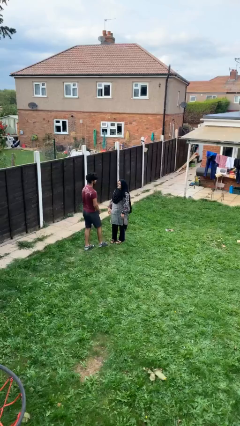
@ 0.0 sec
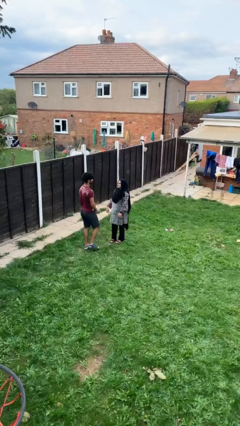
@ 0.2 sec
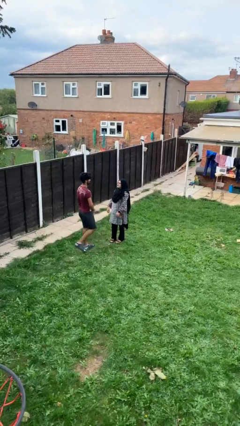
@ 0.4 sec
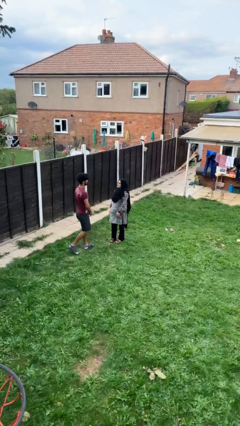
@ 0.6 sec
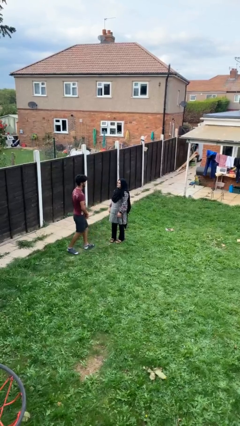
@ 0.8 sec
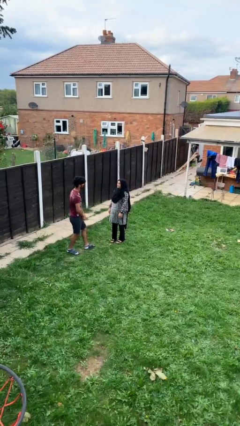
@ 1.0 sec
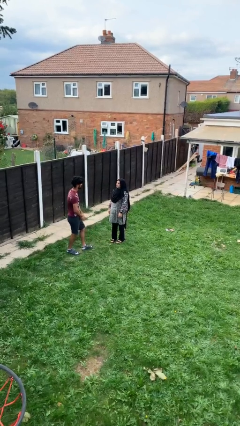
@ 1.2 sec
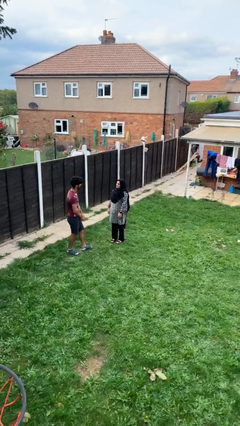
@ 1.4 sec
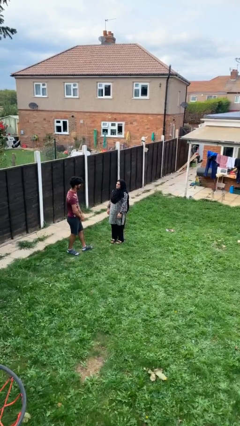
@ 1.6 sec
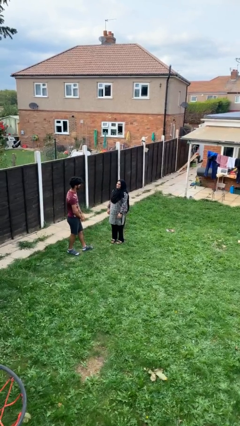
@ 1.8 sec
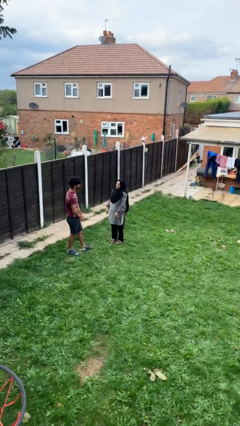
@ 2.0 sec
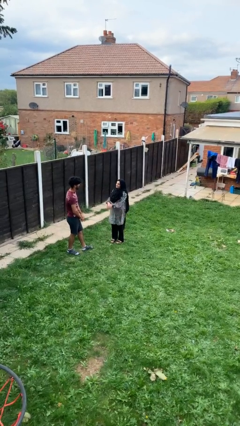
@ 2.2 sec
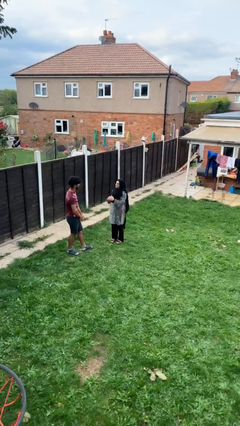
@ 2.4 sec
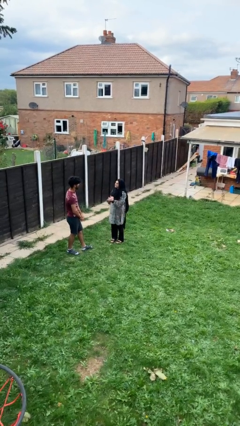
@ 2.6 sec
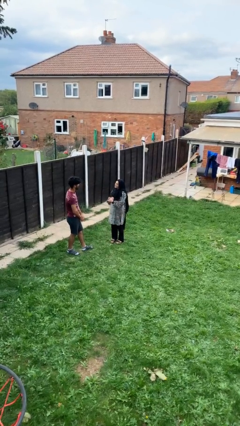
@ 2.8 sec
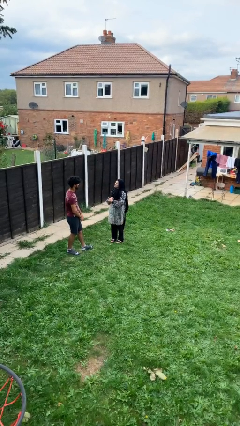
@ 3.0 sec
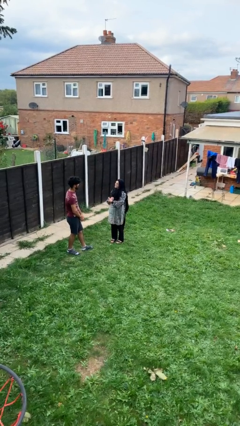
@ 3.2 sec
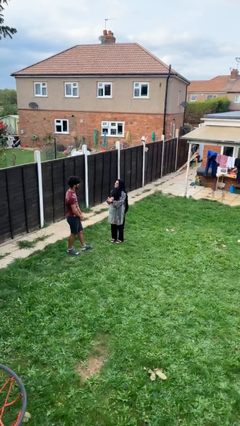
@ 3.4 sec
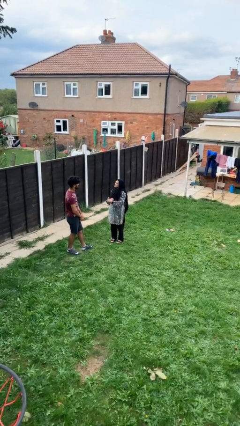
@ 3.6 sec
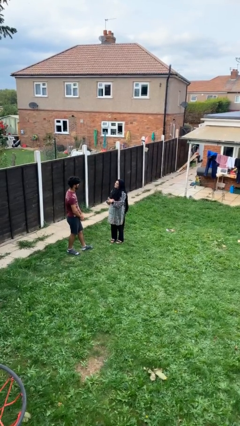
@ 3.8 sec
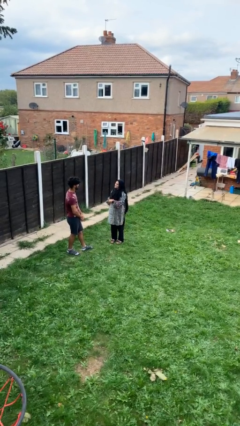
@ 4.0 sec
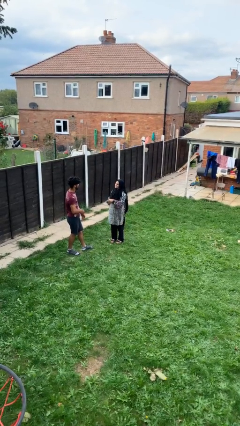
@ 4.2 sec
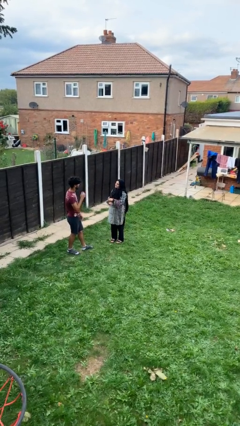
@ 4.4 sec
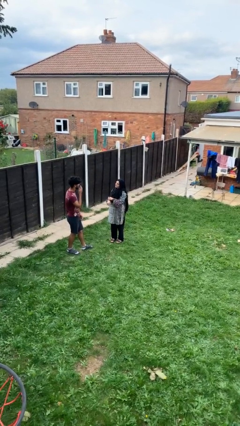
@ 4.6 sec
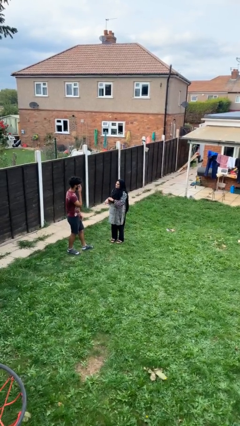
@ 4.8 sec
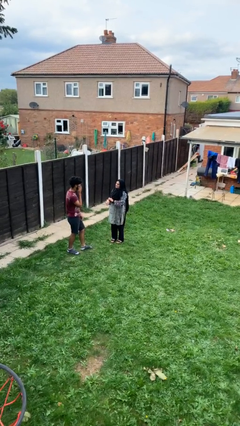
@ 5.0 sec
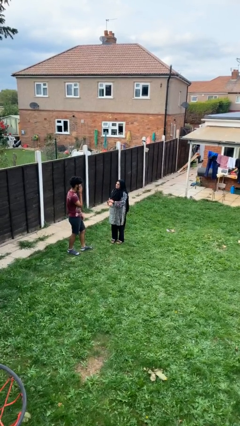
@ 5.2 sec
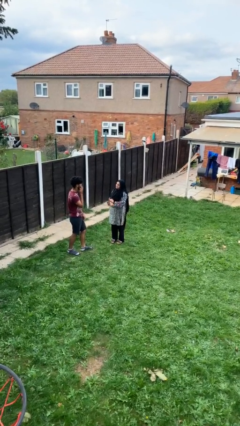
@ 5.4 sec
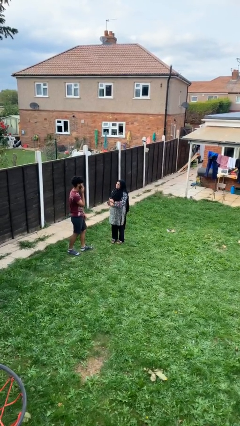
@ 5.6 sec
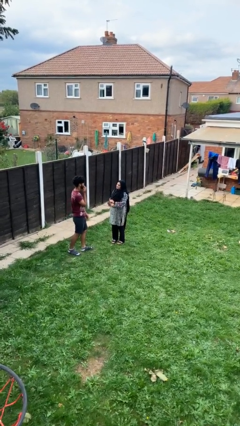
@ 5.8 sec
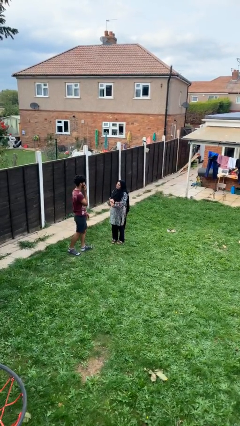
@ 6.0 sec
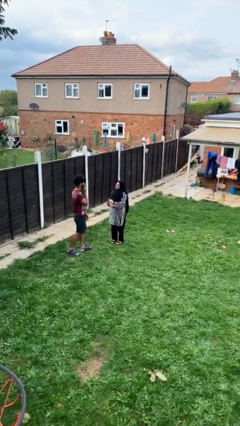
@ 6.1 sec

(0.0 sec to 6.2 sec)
person talks to person

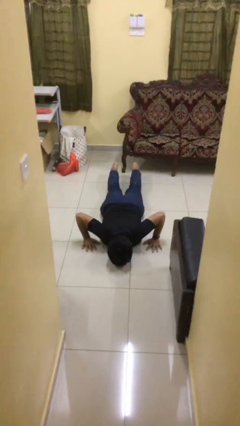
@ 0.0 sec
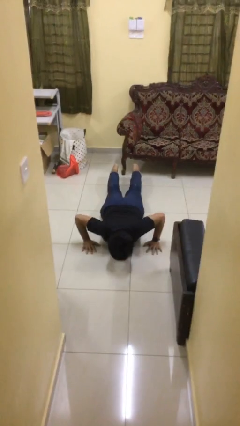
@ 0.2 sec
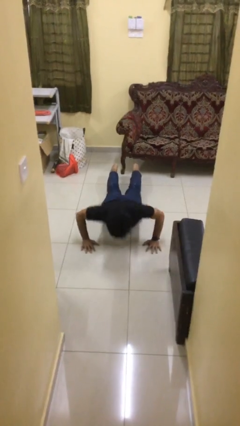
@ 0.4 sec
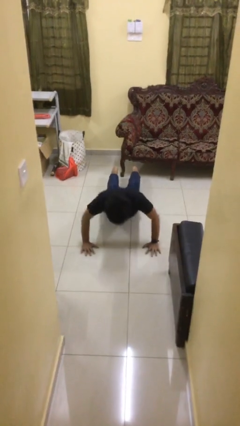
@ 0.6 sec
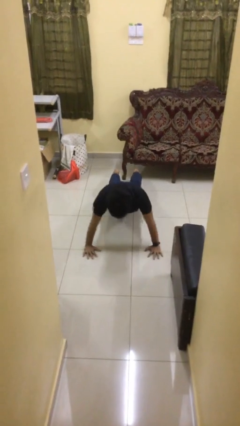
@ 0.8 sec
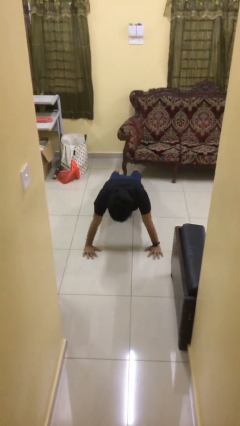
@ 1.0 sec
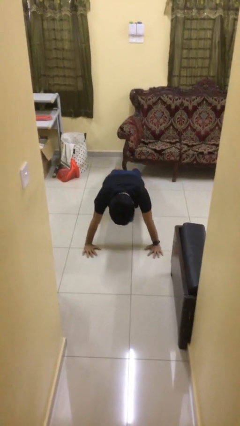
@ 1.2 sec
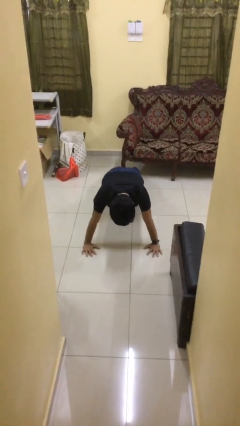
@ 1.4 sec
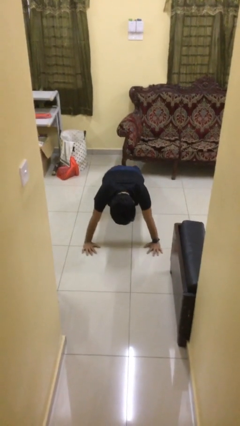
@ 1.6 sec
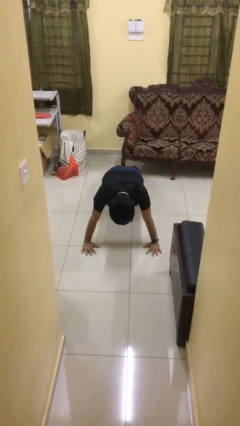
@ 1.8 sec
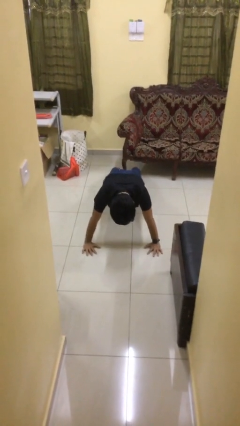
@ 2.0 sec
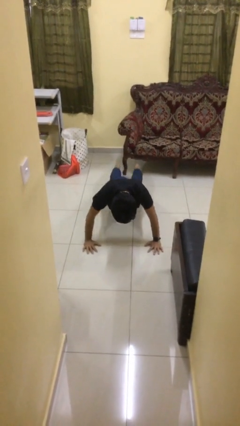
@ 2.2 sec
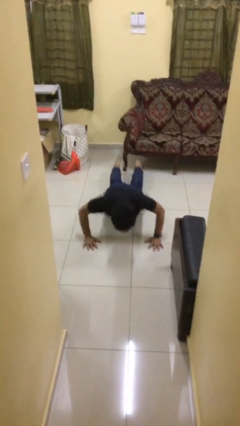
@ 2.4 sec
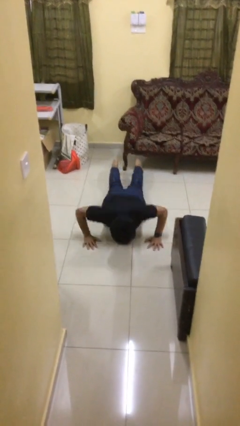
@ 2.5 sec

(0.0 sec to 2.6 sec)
person exercises with pushup

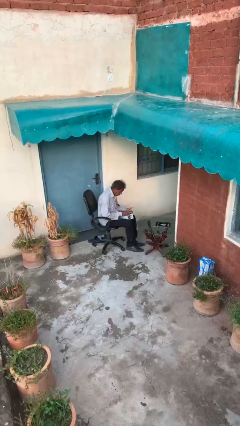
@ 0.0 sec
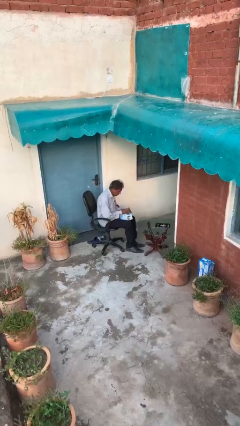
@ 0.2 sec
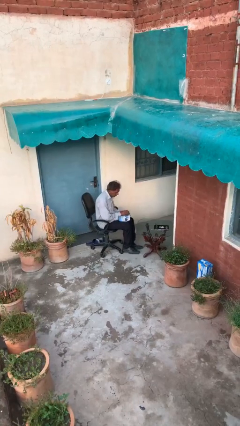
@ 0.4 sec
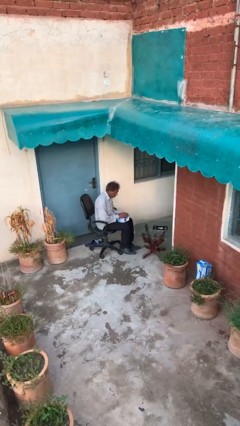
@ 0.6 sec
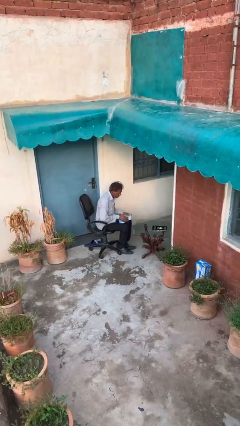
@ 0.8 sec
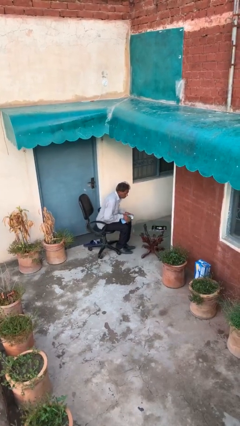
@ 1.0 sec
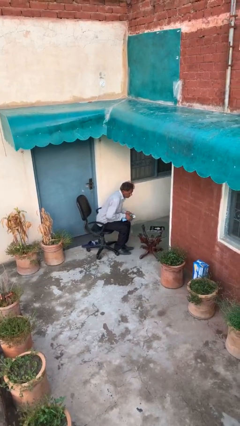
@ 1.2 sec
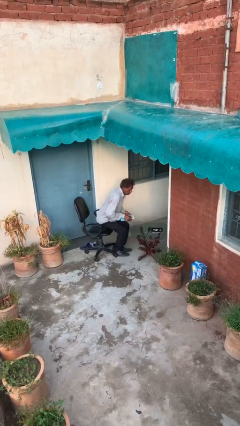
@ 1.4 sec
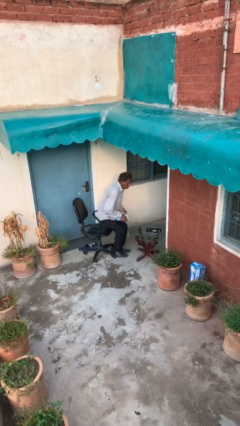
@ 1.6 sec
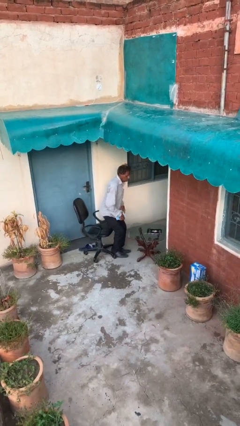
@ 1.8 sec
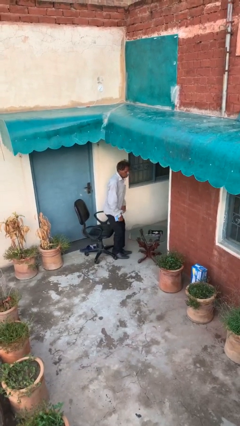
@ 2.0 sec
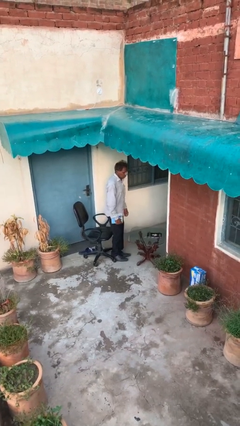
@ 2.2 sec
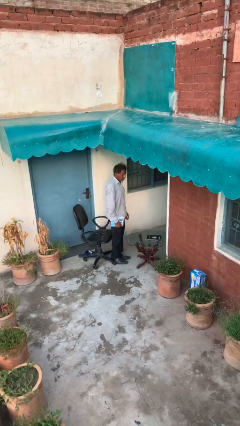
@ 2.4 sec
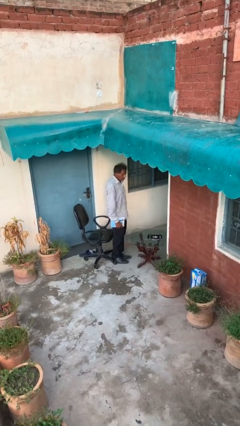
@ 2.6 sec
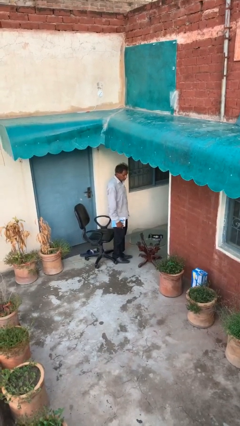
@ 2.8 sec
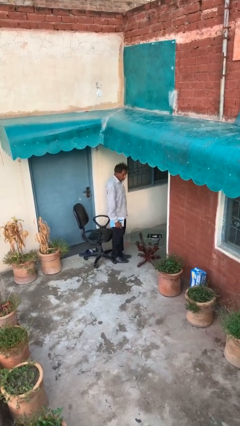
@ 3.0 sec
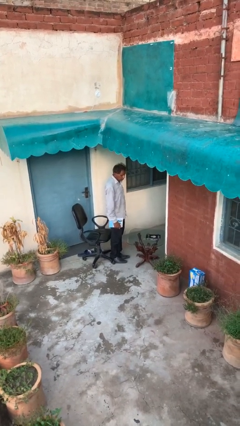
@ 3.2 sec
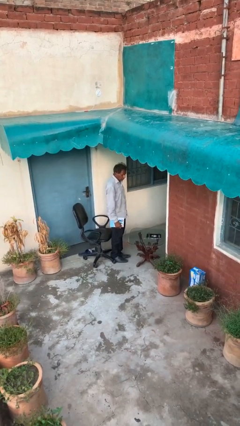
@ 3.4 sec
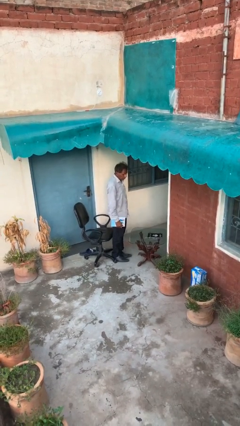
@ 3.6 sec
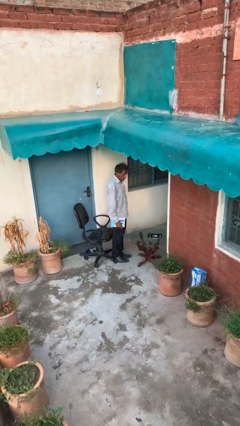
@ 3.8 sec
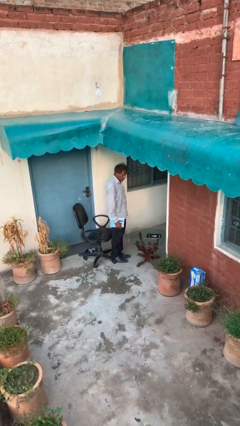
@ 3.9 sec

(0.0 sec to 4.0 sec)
person stands up

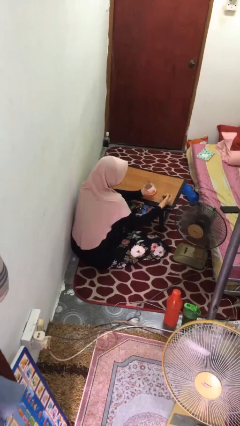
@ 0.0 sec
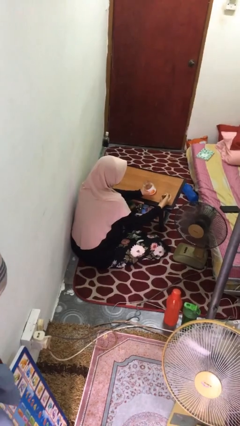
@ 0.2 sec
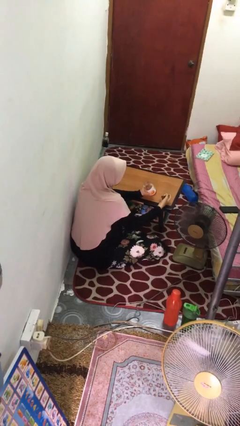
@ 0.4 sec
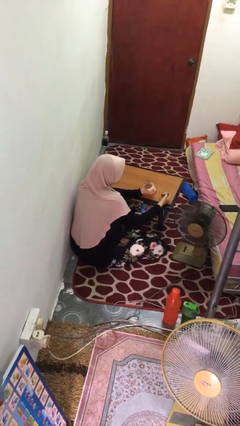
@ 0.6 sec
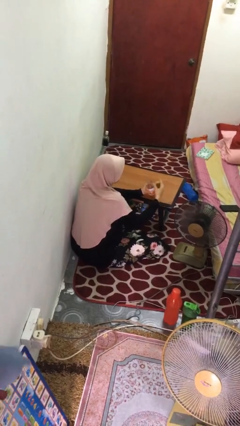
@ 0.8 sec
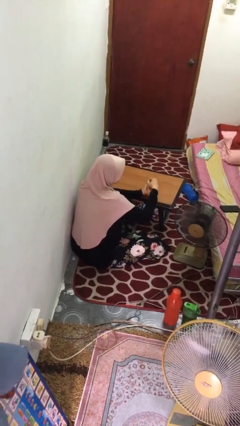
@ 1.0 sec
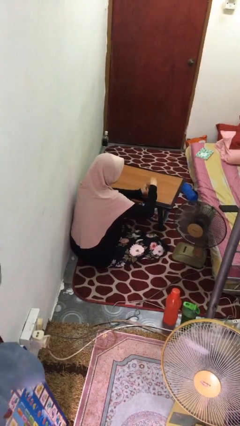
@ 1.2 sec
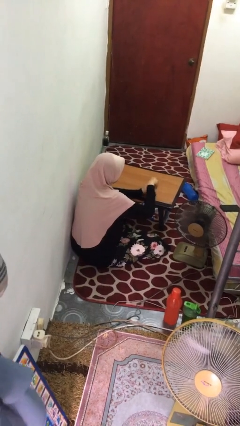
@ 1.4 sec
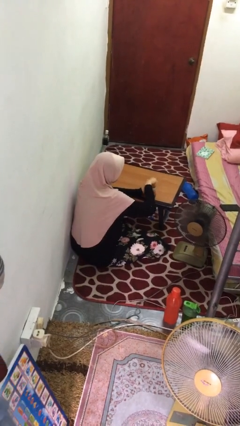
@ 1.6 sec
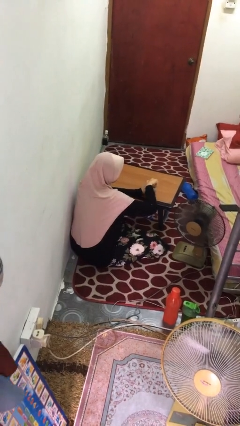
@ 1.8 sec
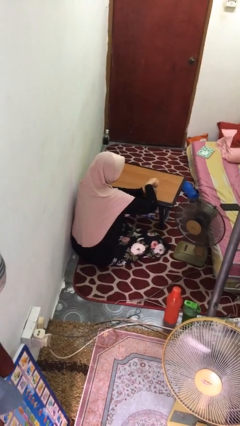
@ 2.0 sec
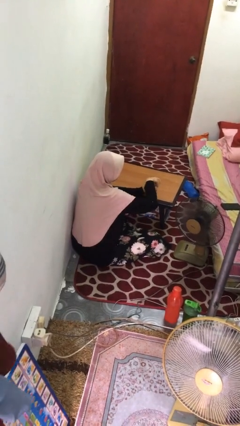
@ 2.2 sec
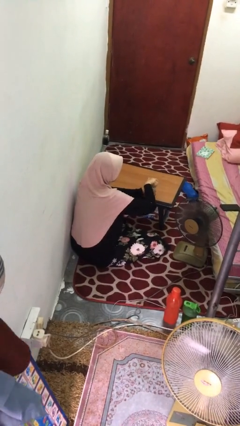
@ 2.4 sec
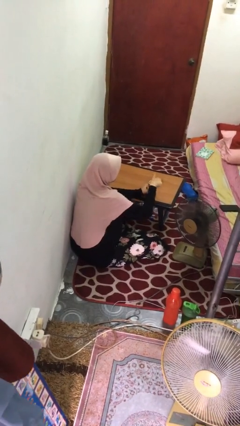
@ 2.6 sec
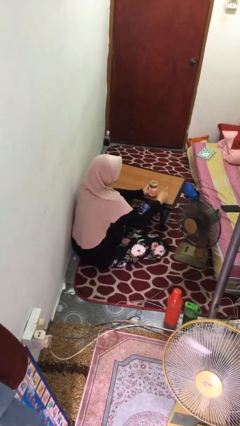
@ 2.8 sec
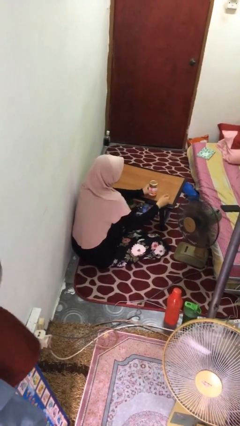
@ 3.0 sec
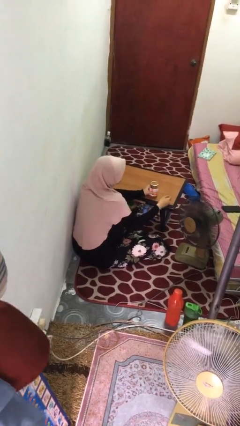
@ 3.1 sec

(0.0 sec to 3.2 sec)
person closes jar

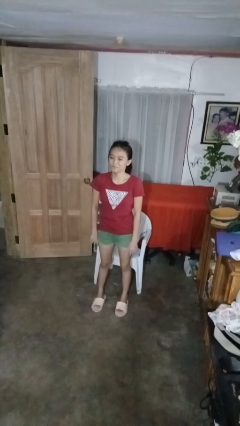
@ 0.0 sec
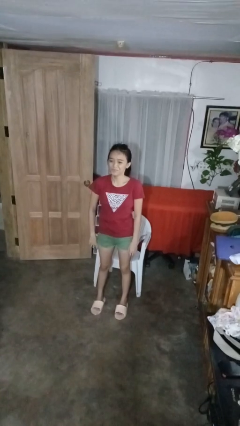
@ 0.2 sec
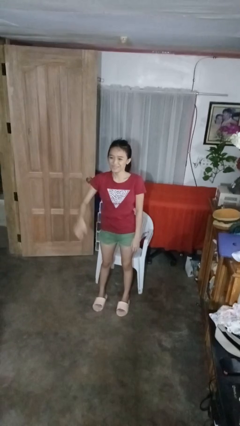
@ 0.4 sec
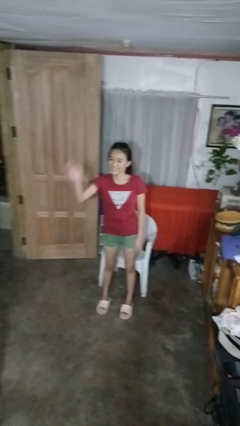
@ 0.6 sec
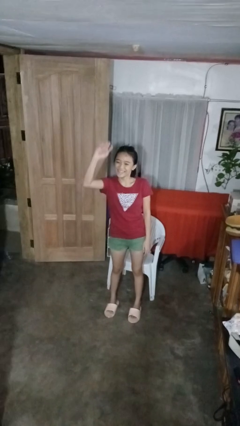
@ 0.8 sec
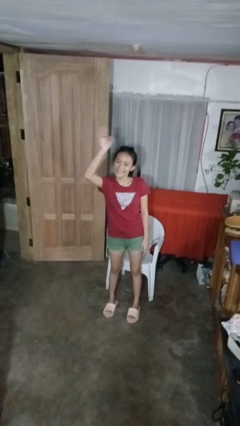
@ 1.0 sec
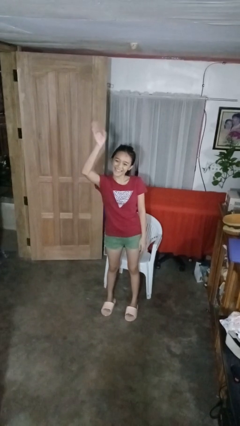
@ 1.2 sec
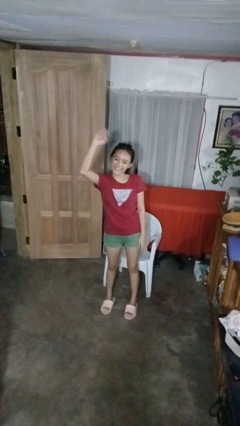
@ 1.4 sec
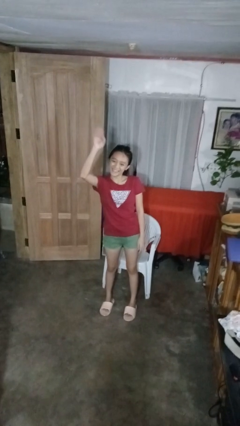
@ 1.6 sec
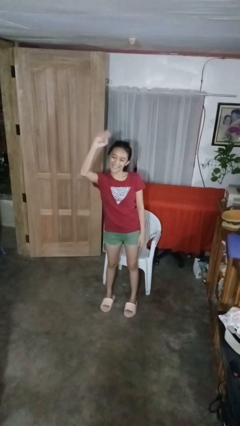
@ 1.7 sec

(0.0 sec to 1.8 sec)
person waves at person
